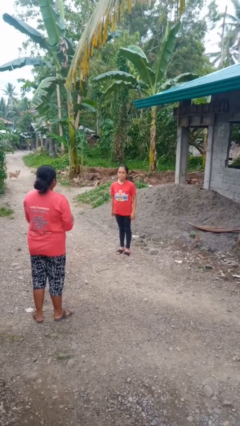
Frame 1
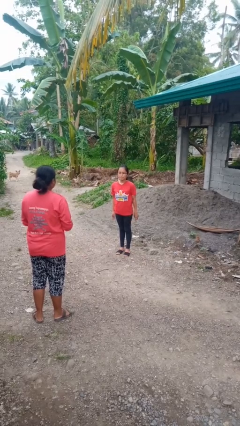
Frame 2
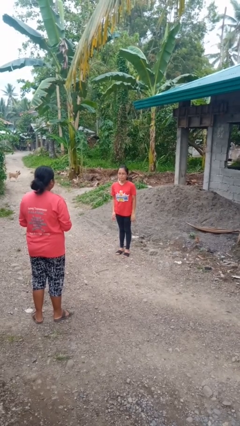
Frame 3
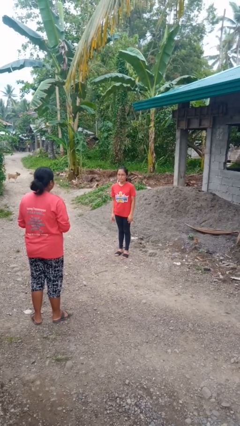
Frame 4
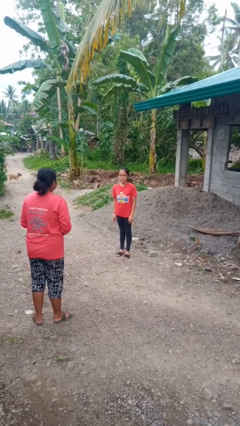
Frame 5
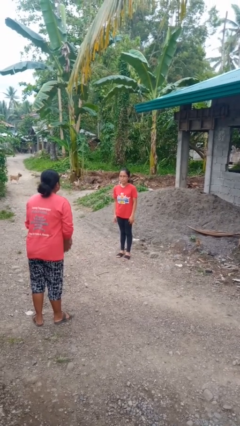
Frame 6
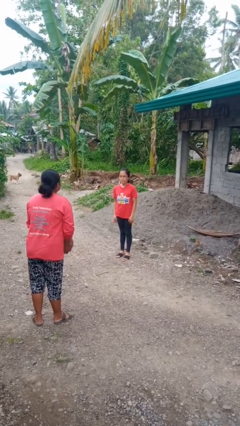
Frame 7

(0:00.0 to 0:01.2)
person throws object to person

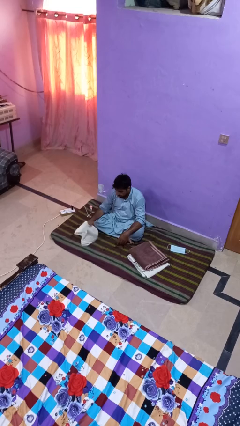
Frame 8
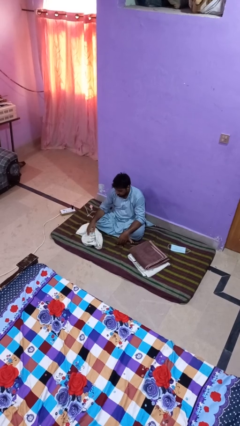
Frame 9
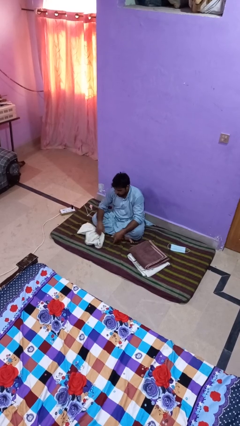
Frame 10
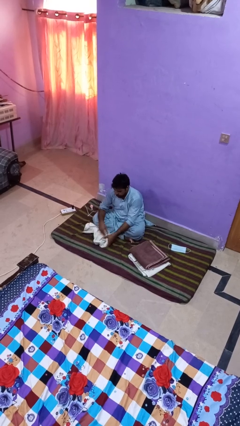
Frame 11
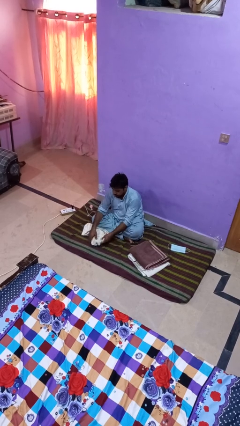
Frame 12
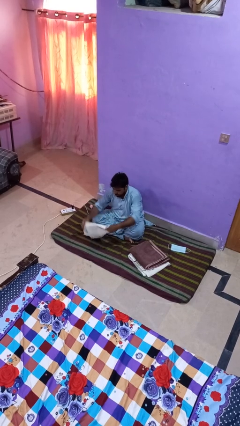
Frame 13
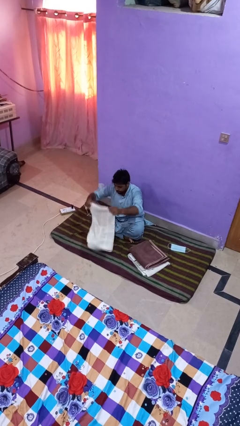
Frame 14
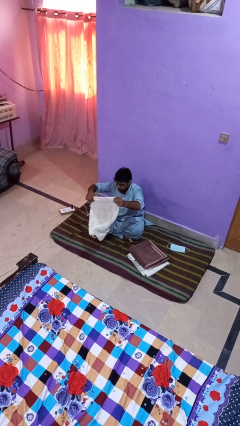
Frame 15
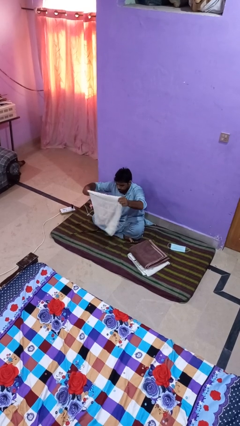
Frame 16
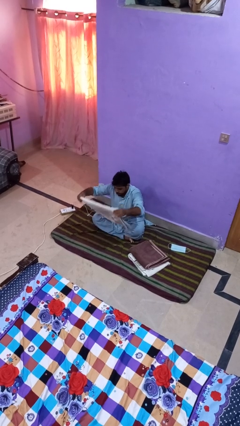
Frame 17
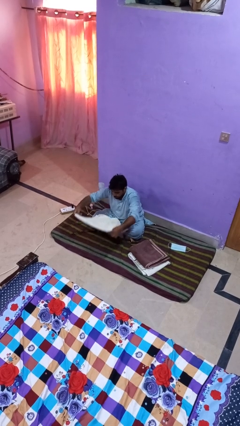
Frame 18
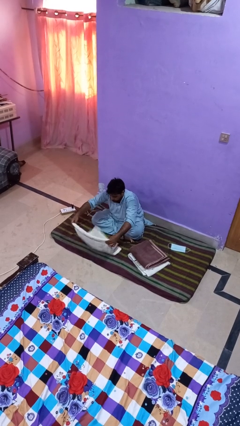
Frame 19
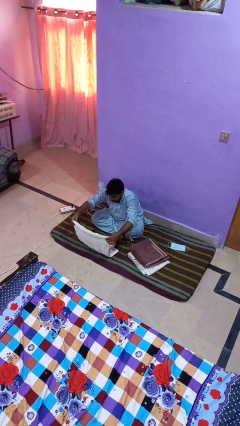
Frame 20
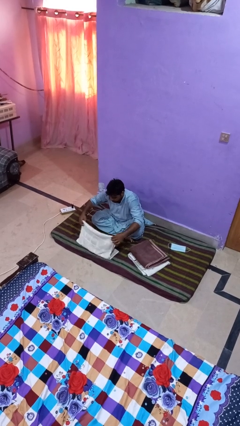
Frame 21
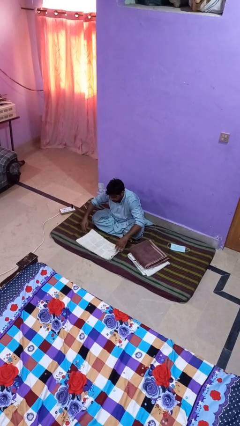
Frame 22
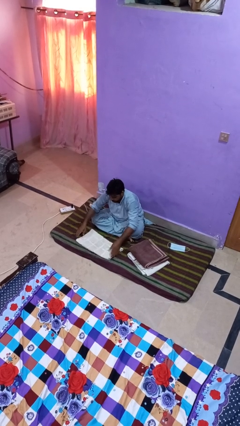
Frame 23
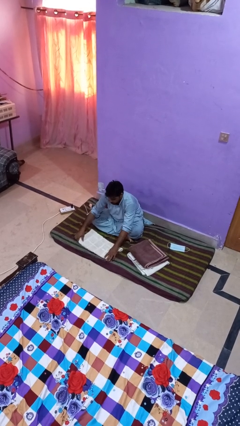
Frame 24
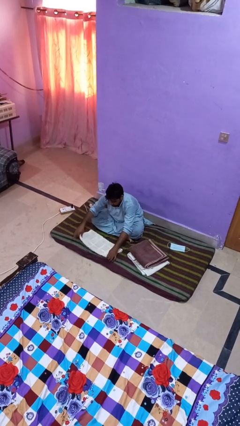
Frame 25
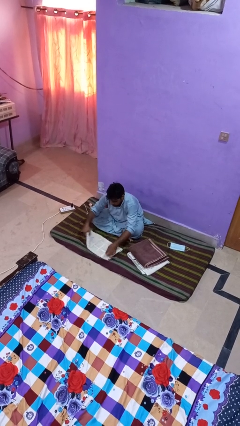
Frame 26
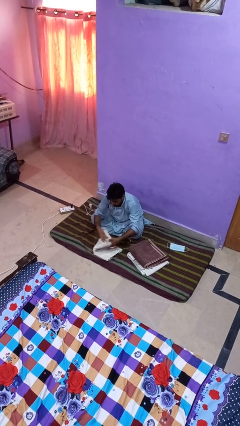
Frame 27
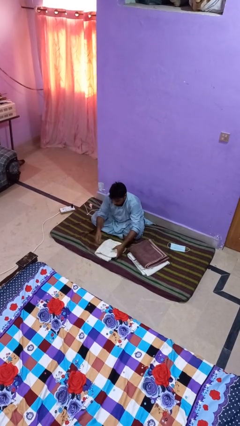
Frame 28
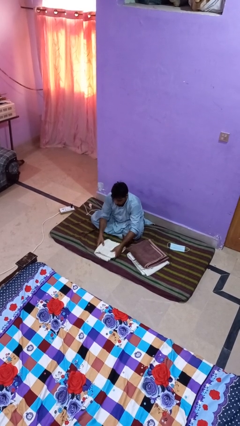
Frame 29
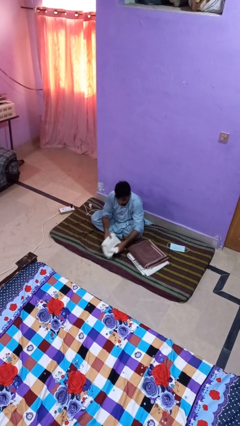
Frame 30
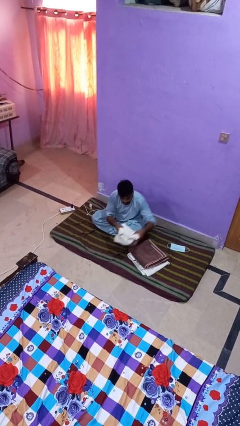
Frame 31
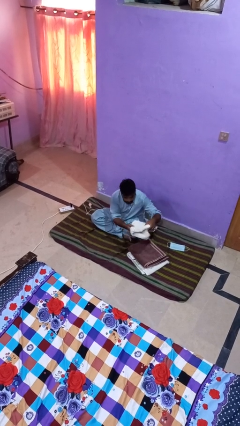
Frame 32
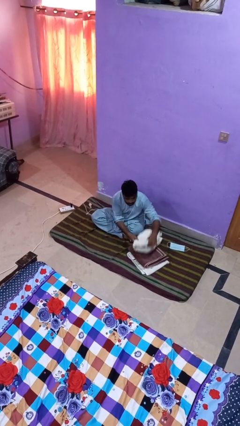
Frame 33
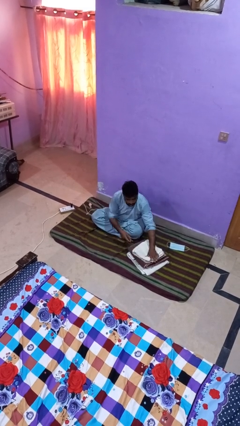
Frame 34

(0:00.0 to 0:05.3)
person folds towel

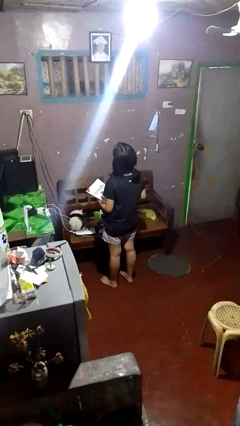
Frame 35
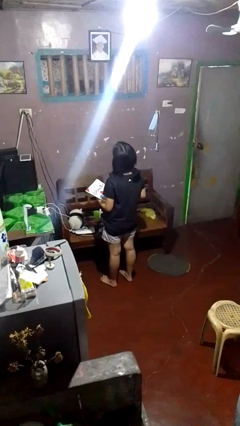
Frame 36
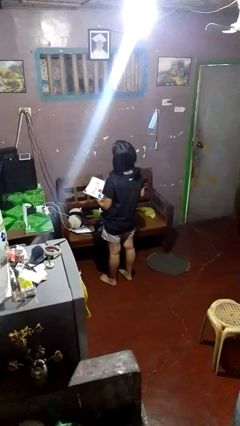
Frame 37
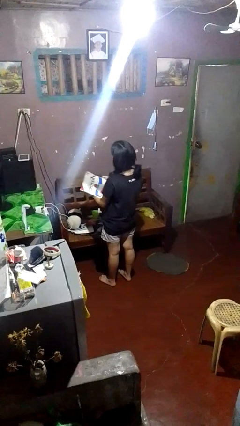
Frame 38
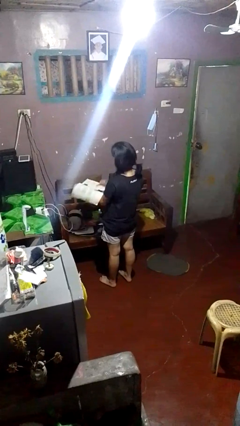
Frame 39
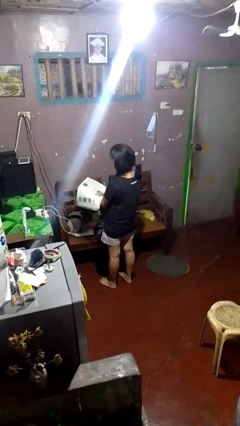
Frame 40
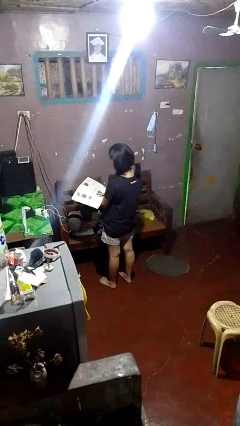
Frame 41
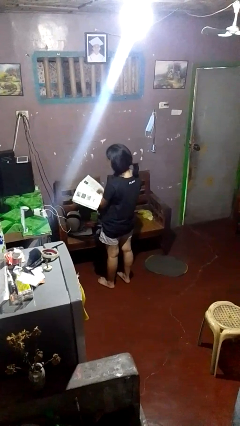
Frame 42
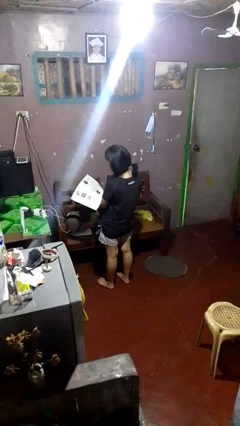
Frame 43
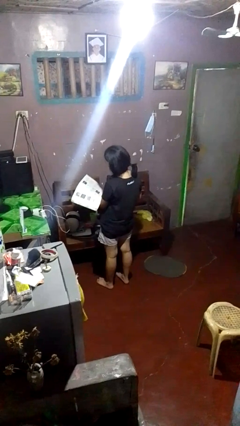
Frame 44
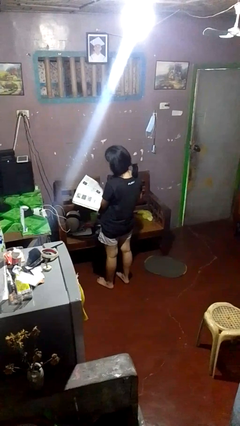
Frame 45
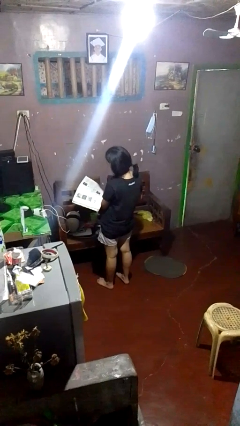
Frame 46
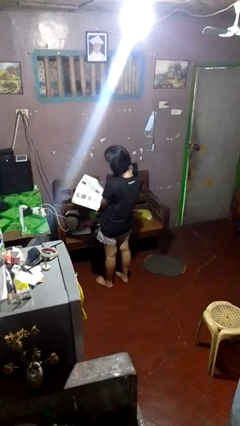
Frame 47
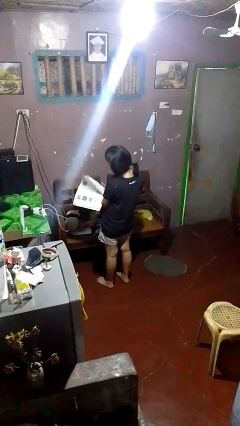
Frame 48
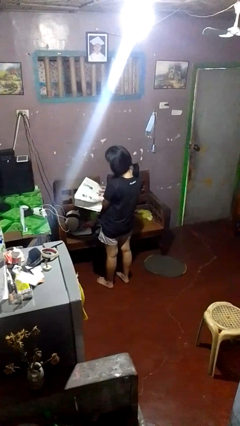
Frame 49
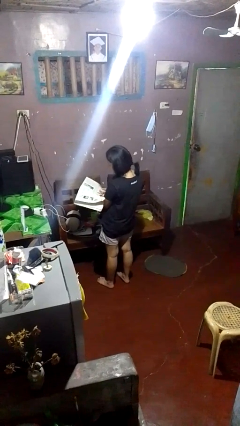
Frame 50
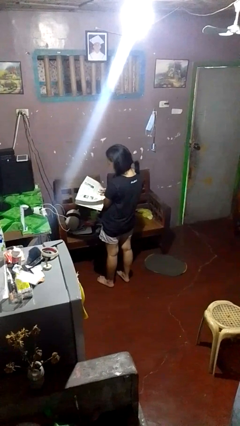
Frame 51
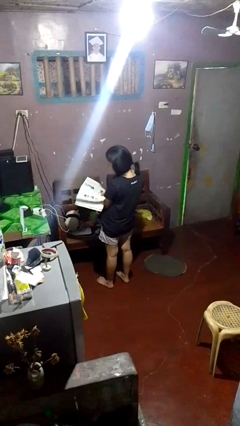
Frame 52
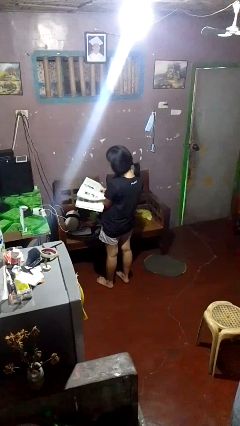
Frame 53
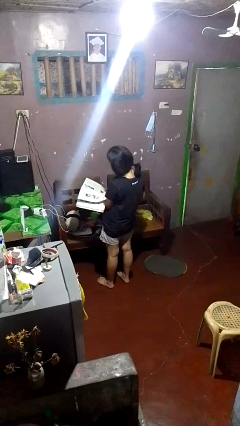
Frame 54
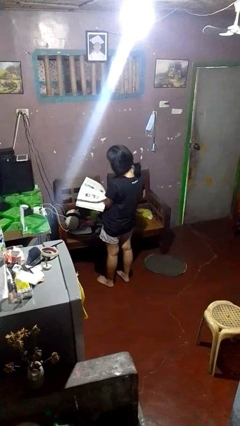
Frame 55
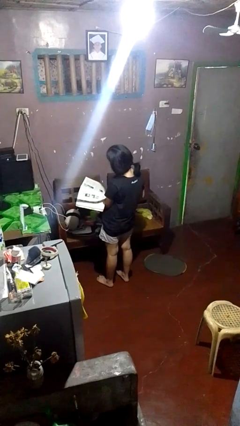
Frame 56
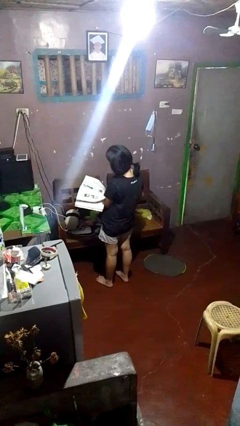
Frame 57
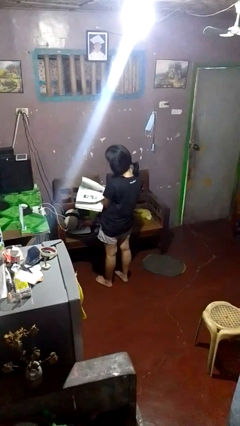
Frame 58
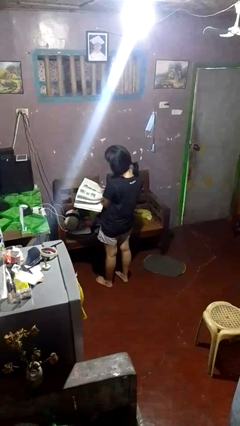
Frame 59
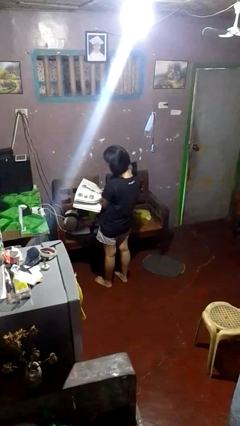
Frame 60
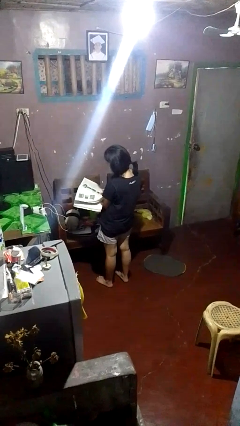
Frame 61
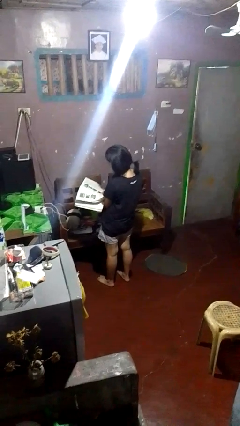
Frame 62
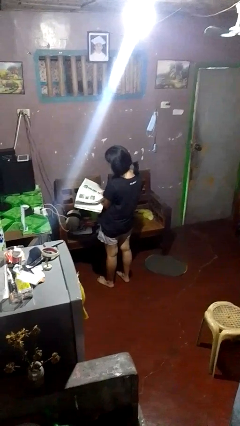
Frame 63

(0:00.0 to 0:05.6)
person reads book

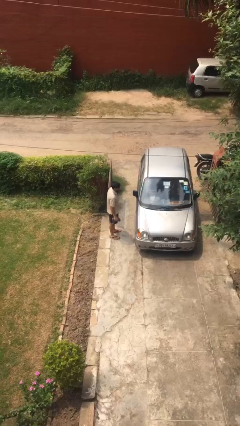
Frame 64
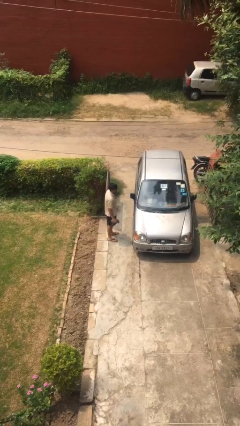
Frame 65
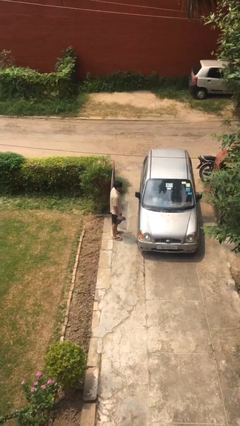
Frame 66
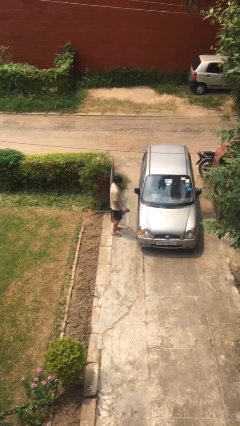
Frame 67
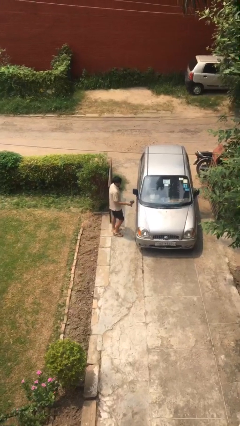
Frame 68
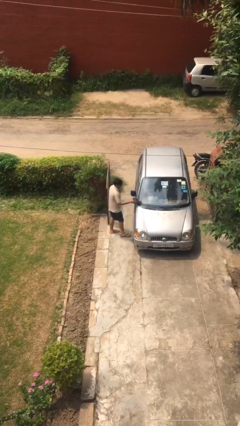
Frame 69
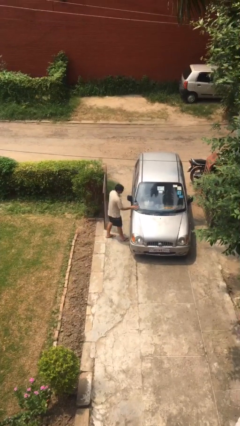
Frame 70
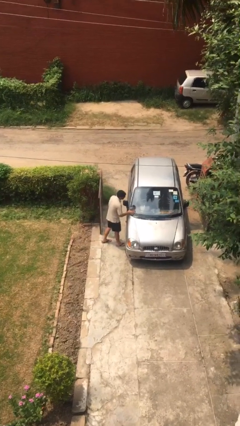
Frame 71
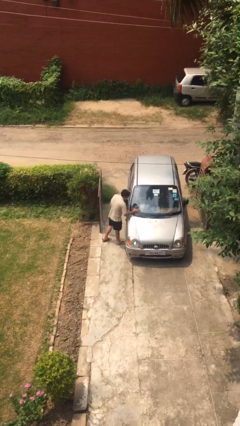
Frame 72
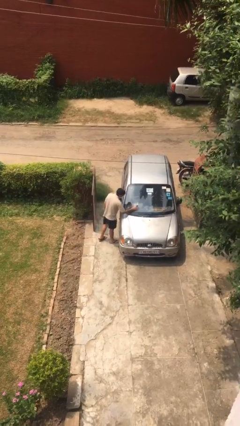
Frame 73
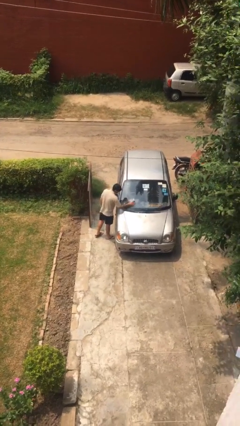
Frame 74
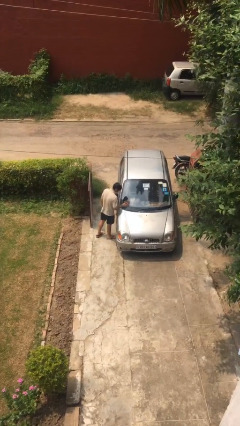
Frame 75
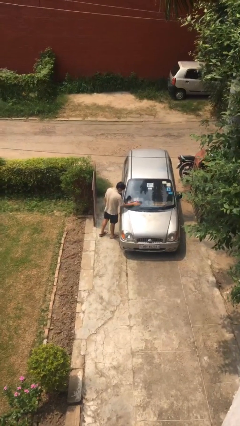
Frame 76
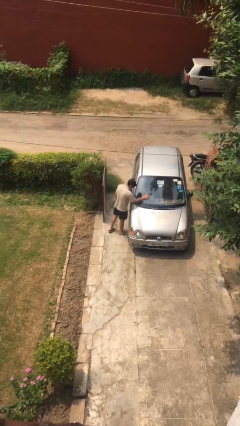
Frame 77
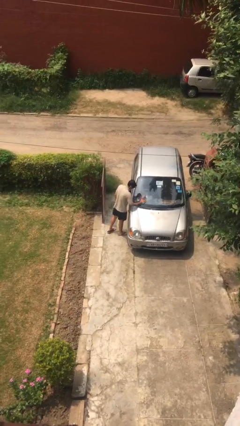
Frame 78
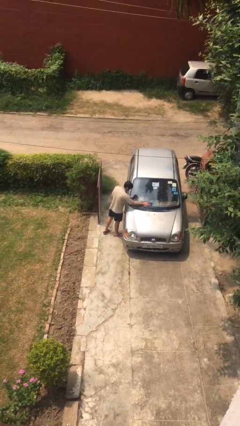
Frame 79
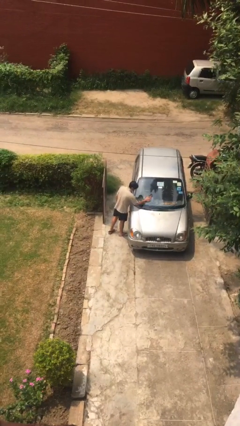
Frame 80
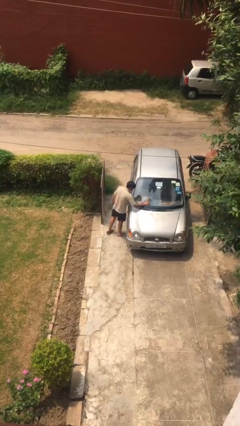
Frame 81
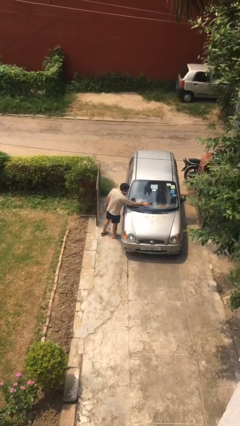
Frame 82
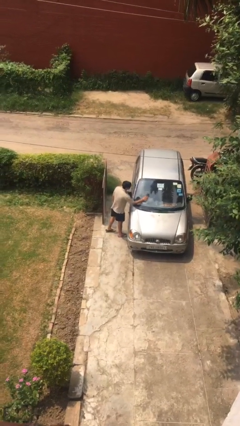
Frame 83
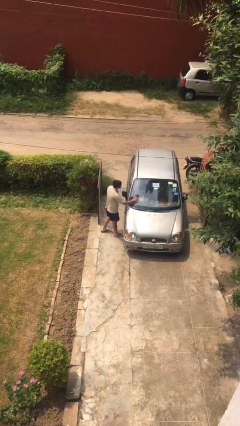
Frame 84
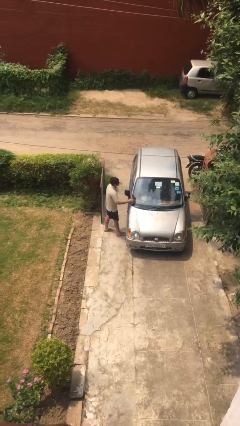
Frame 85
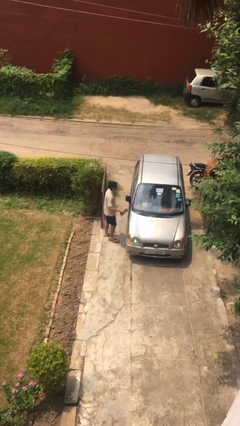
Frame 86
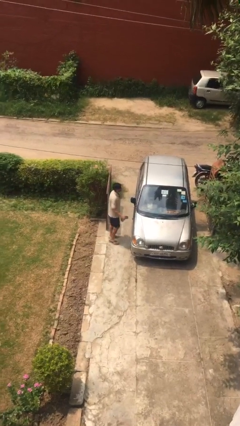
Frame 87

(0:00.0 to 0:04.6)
person polishes car with rag

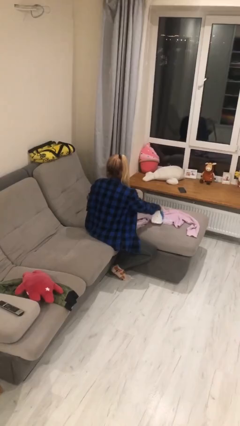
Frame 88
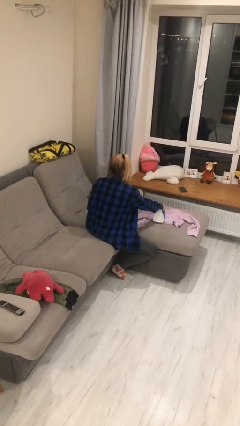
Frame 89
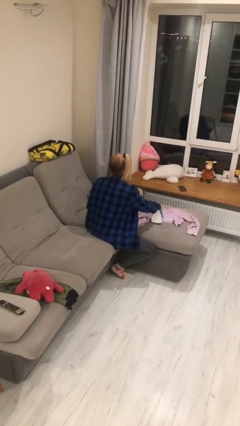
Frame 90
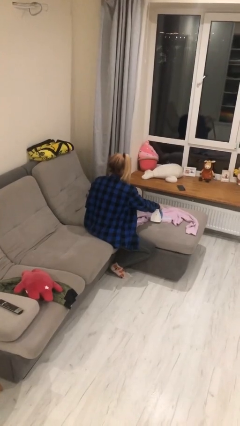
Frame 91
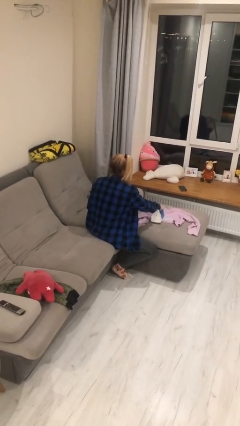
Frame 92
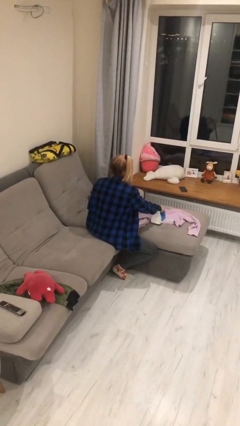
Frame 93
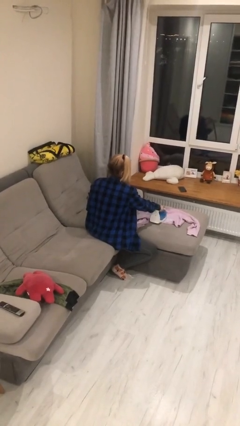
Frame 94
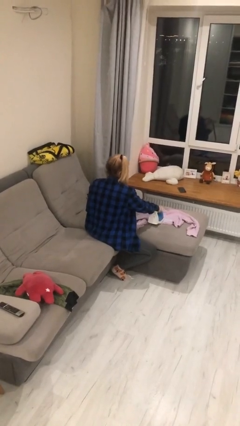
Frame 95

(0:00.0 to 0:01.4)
person irons clothes
